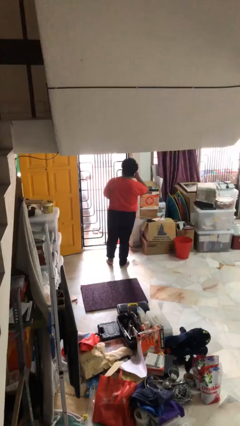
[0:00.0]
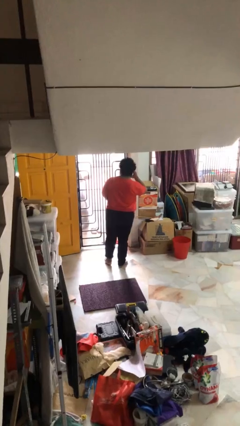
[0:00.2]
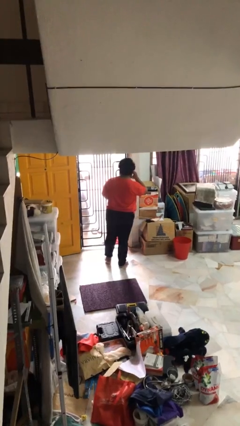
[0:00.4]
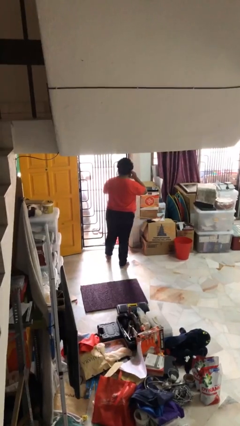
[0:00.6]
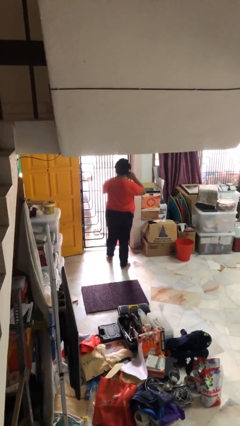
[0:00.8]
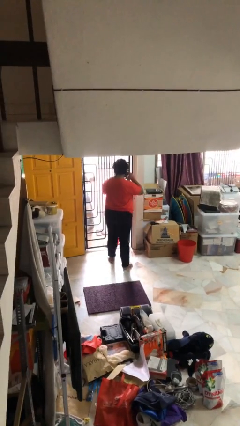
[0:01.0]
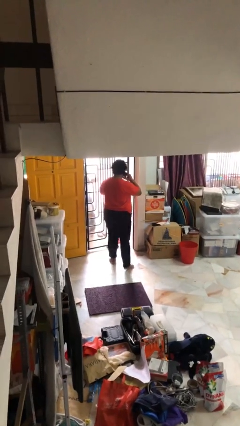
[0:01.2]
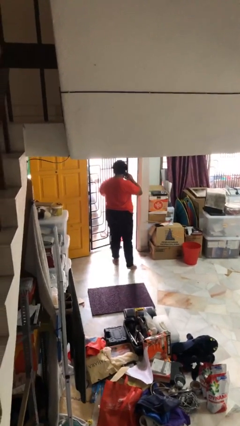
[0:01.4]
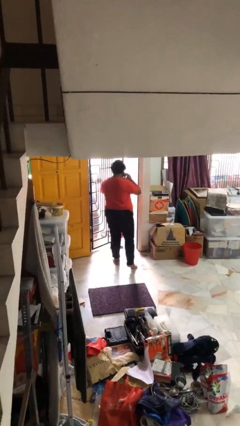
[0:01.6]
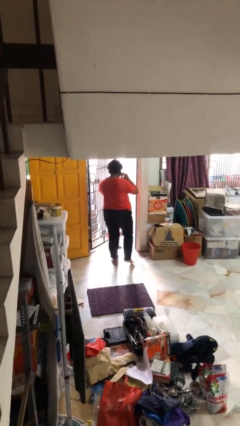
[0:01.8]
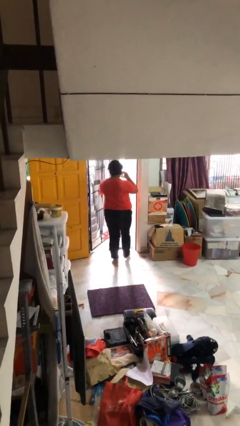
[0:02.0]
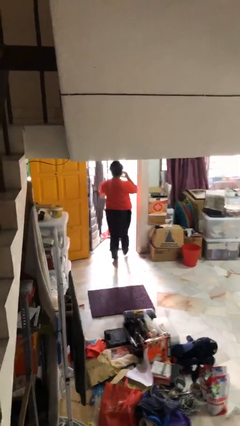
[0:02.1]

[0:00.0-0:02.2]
person opens facility door

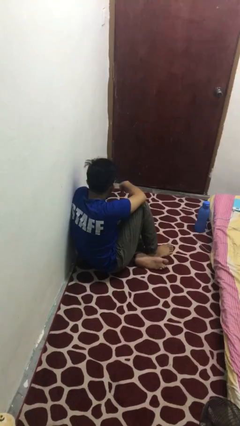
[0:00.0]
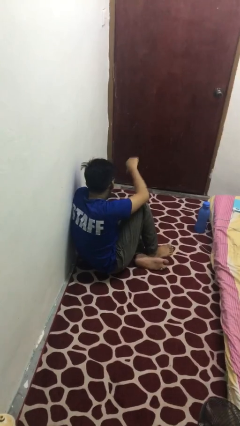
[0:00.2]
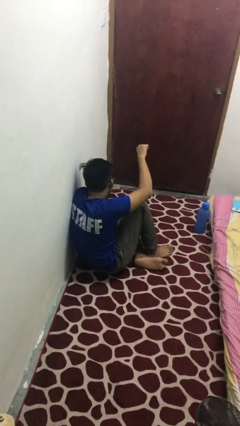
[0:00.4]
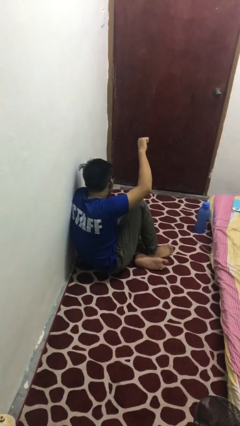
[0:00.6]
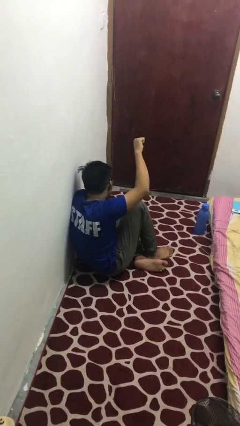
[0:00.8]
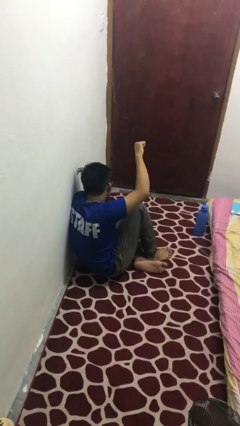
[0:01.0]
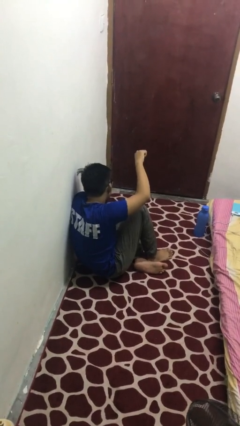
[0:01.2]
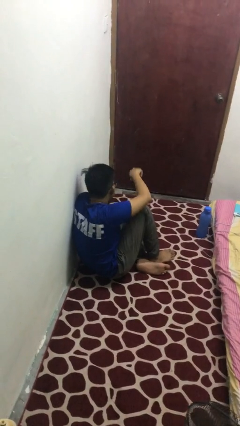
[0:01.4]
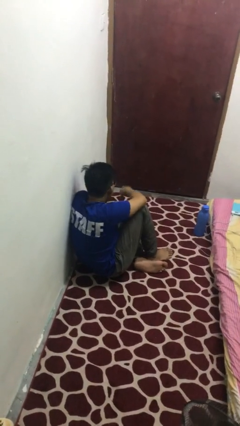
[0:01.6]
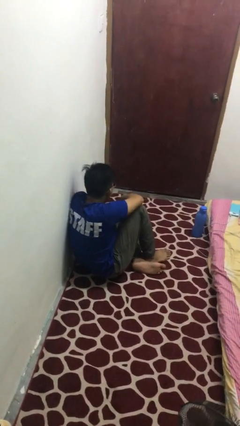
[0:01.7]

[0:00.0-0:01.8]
person gestures thumbs down

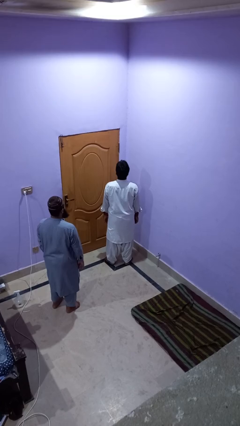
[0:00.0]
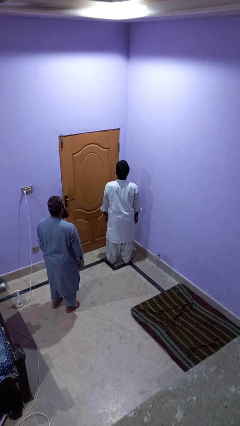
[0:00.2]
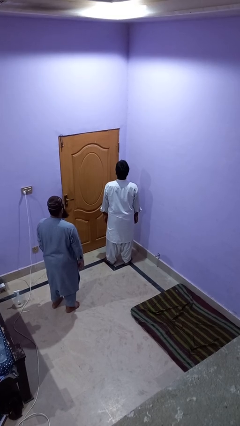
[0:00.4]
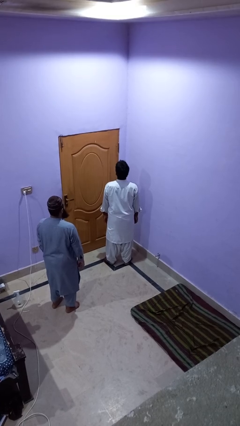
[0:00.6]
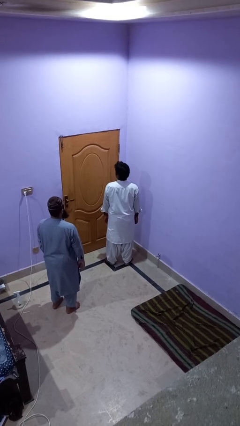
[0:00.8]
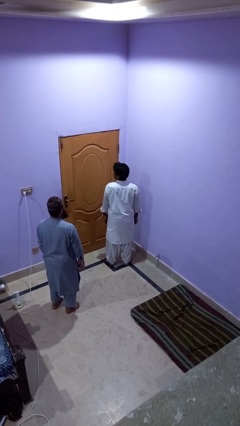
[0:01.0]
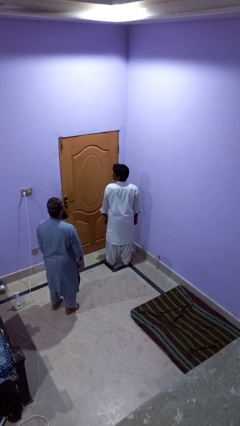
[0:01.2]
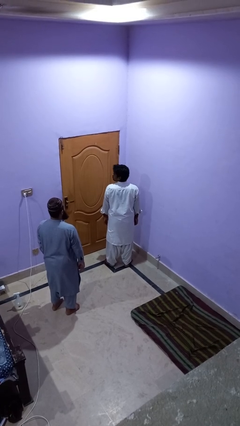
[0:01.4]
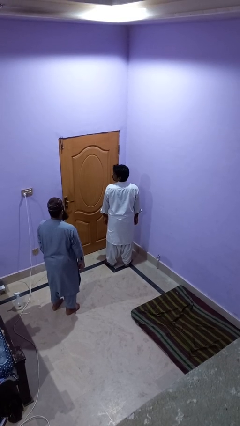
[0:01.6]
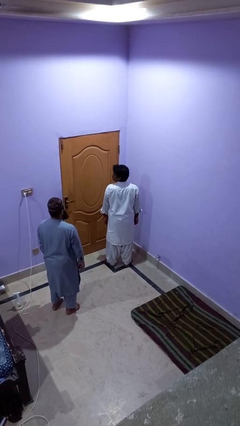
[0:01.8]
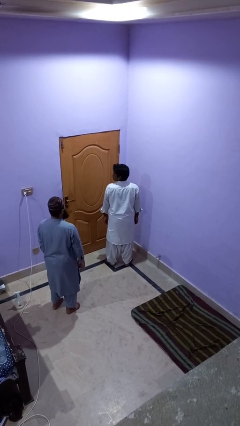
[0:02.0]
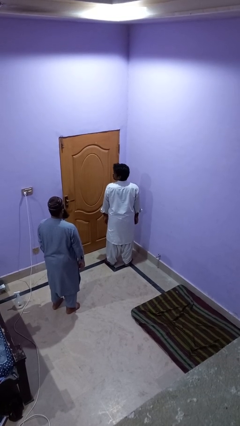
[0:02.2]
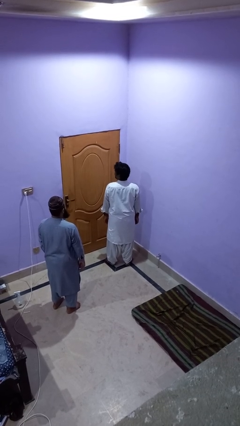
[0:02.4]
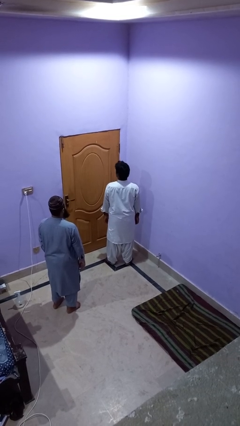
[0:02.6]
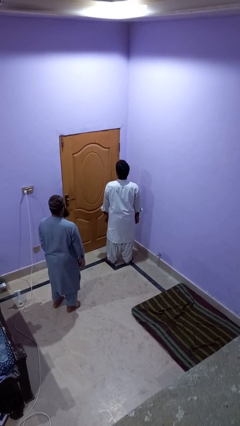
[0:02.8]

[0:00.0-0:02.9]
person looks over shoulder

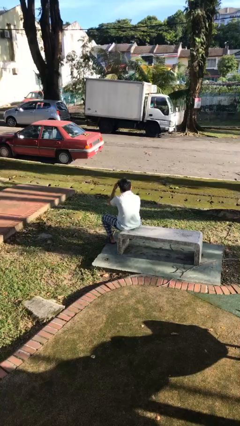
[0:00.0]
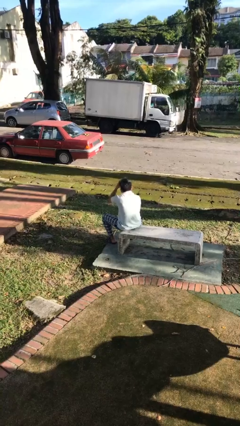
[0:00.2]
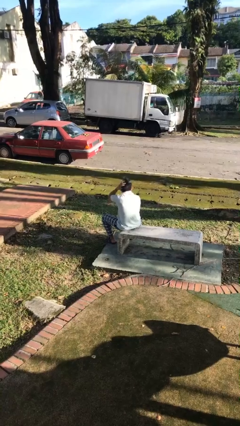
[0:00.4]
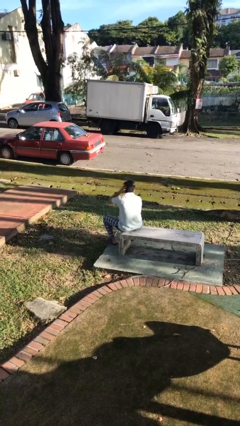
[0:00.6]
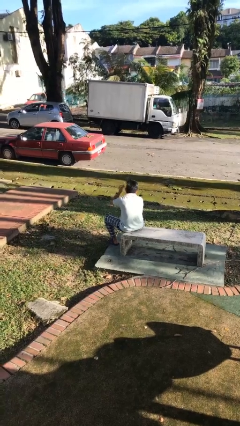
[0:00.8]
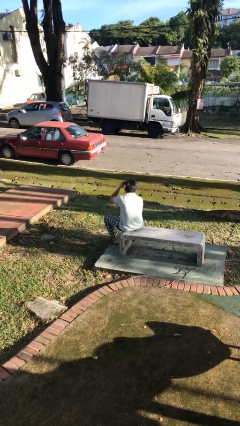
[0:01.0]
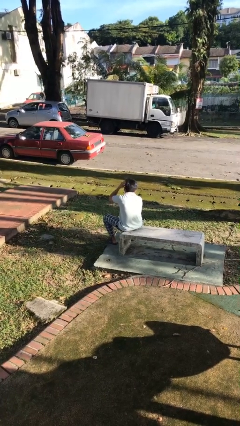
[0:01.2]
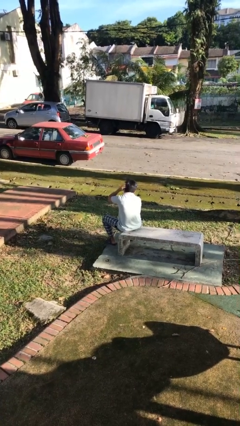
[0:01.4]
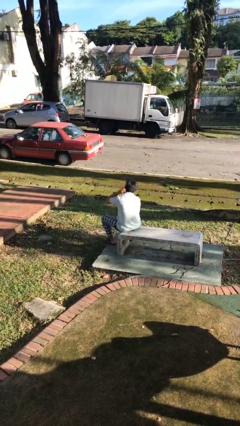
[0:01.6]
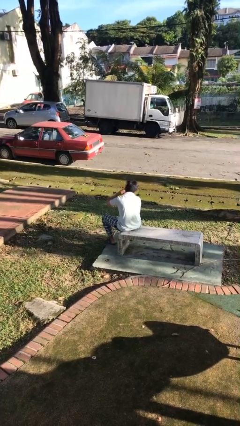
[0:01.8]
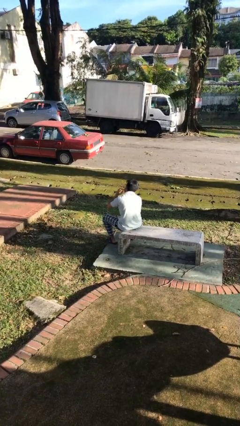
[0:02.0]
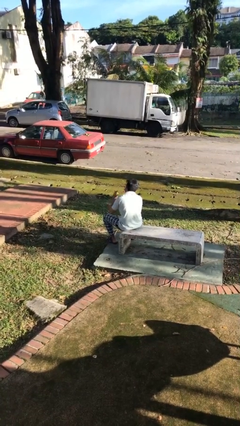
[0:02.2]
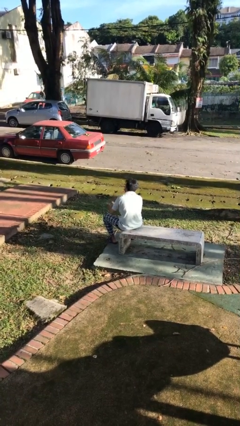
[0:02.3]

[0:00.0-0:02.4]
person strokes hair

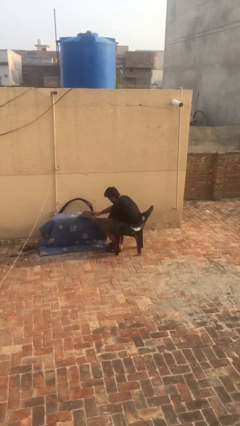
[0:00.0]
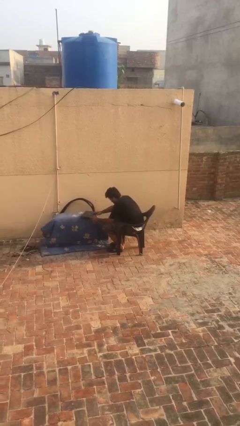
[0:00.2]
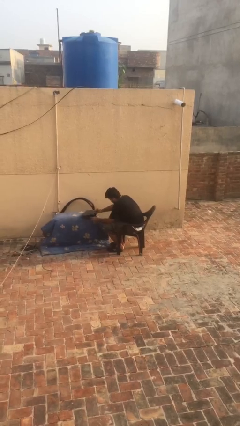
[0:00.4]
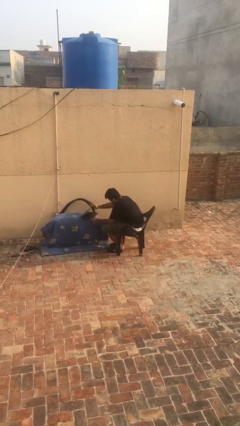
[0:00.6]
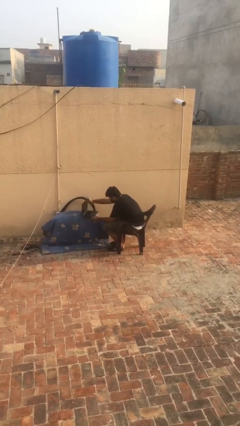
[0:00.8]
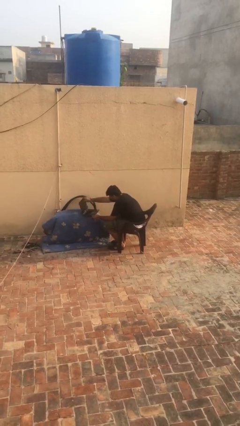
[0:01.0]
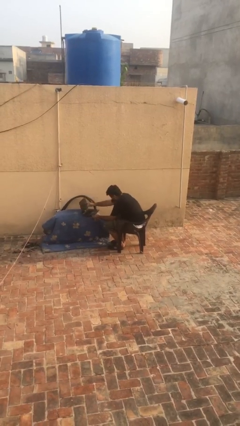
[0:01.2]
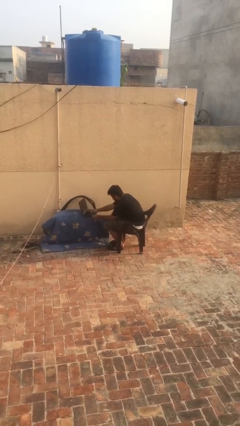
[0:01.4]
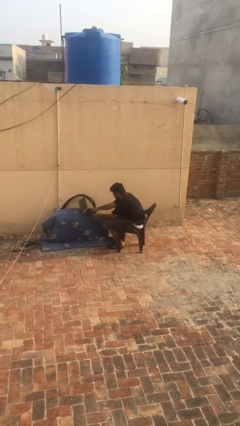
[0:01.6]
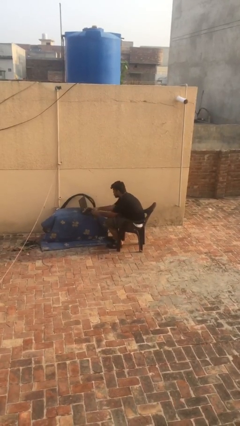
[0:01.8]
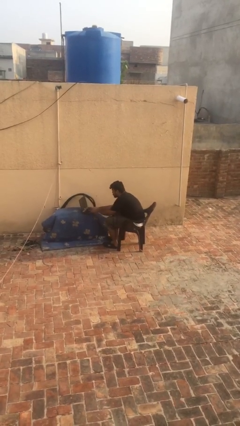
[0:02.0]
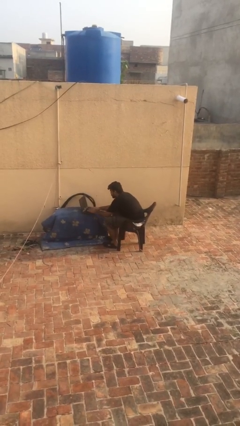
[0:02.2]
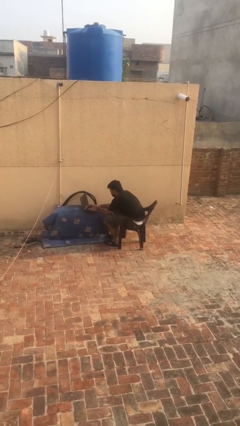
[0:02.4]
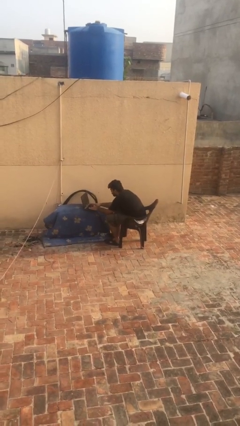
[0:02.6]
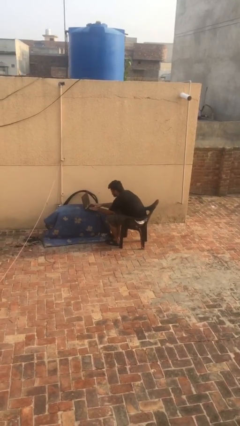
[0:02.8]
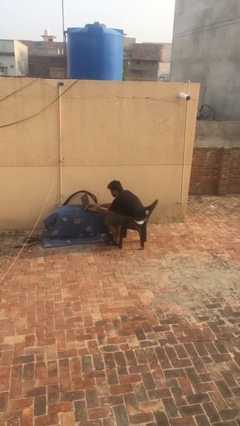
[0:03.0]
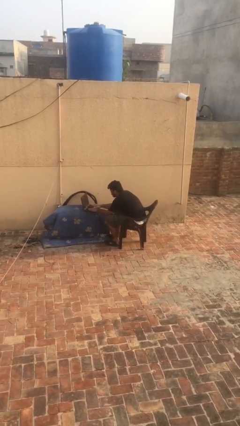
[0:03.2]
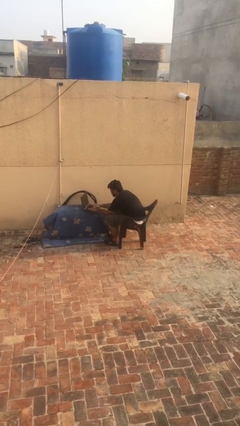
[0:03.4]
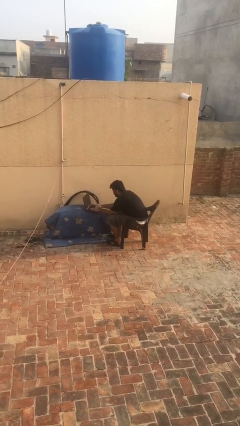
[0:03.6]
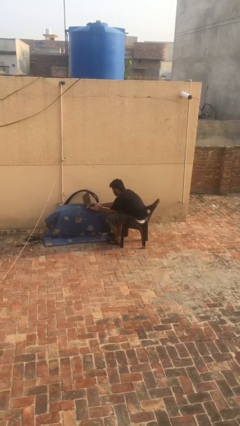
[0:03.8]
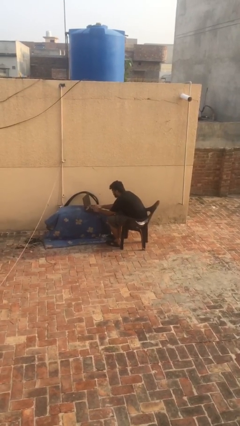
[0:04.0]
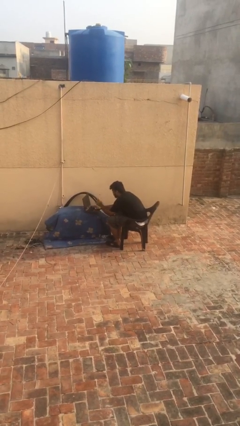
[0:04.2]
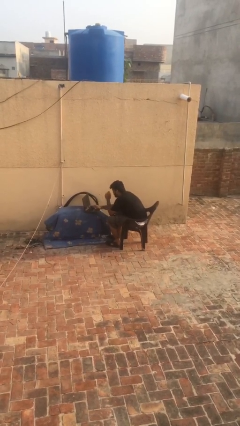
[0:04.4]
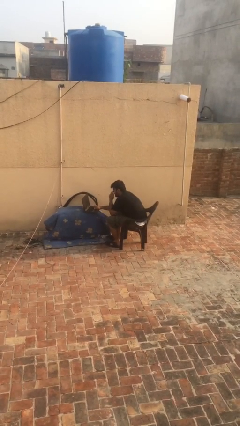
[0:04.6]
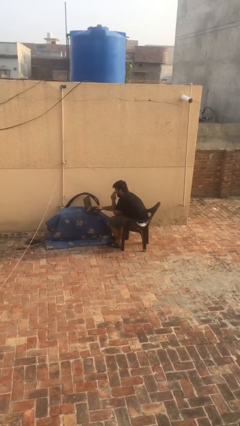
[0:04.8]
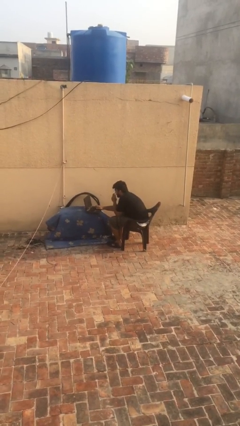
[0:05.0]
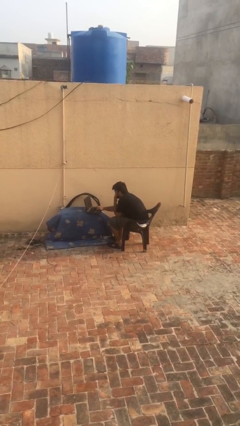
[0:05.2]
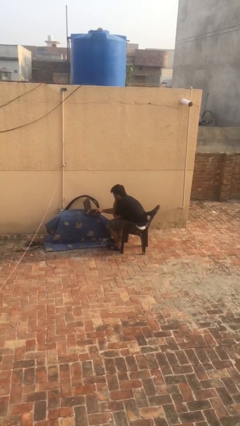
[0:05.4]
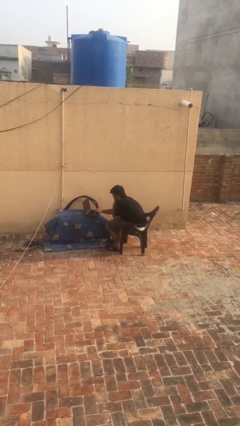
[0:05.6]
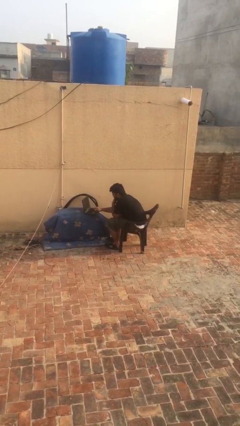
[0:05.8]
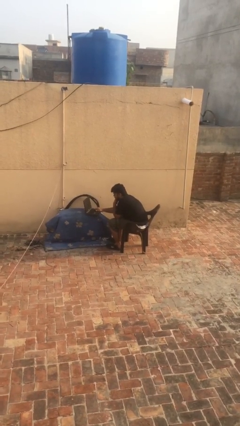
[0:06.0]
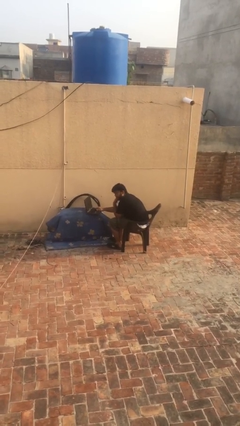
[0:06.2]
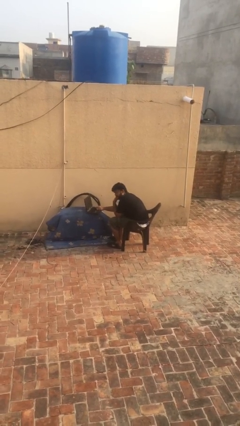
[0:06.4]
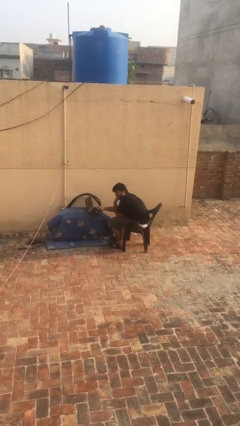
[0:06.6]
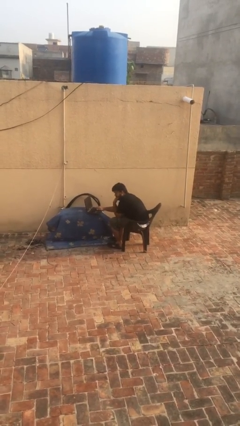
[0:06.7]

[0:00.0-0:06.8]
person interacts with laptop

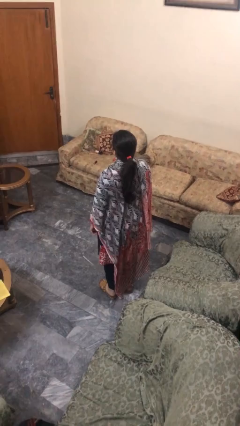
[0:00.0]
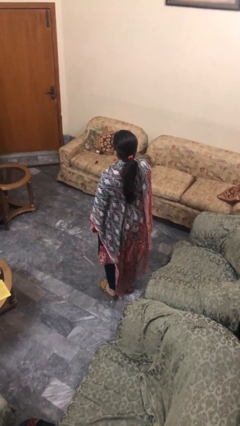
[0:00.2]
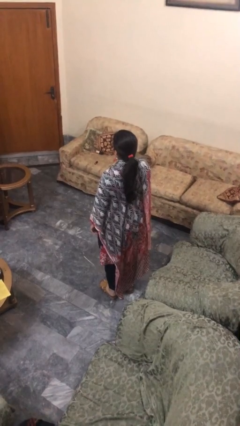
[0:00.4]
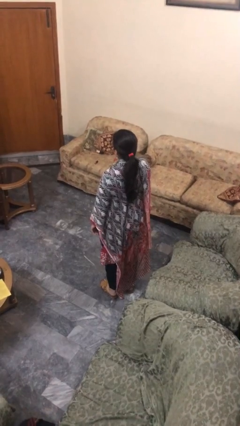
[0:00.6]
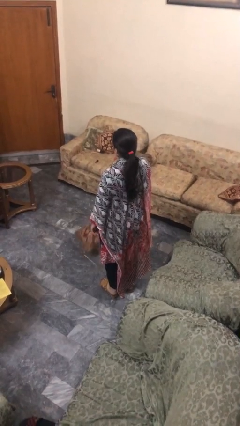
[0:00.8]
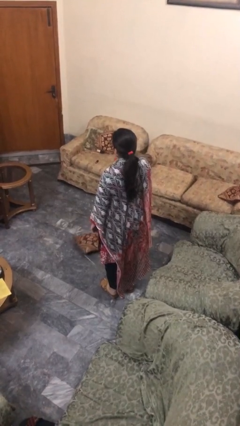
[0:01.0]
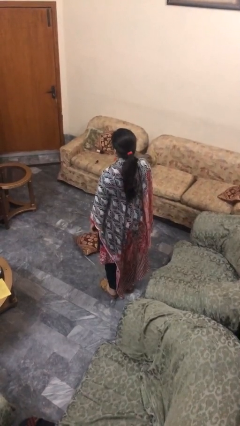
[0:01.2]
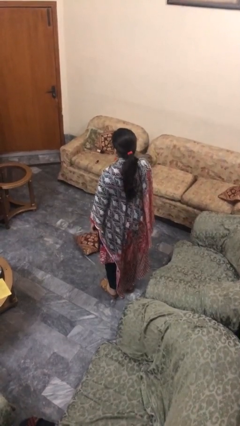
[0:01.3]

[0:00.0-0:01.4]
person throws object to ground

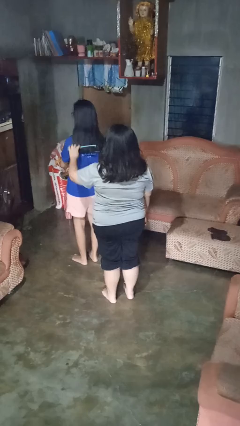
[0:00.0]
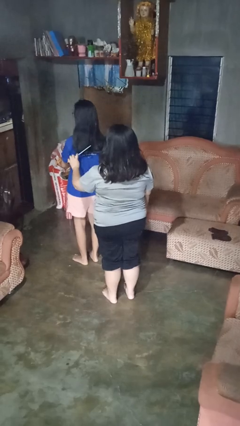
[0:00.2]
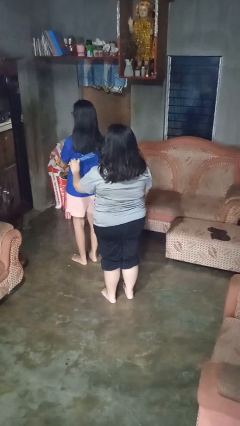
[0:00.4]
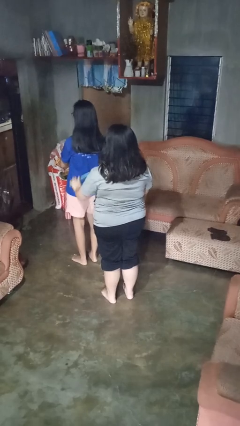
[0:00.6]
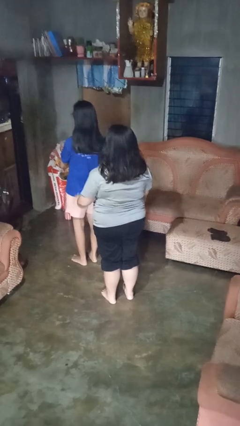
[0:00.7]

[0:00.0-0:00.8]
person brushes hair of person
